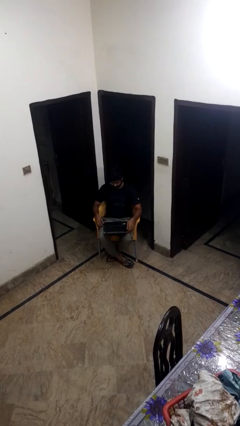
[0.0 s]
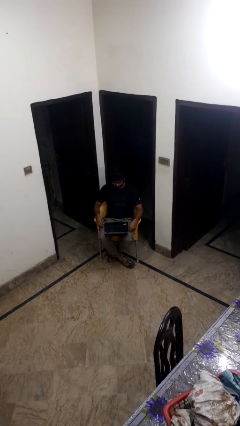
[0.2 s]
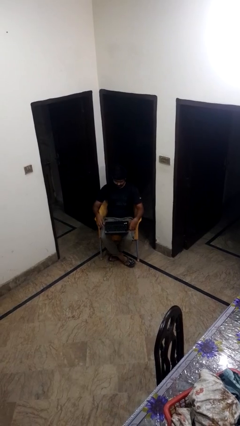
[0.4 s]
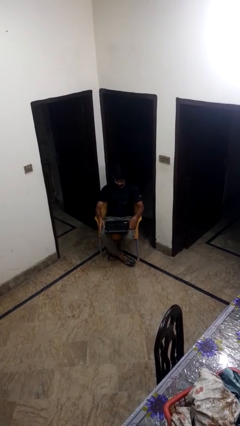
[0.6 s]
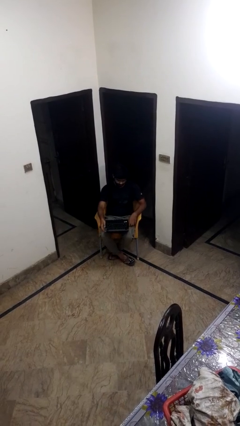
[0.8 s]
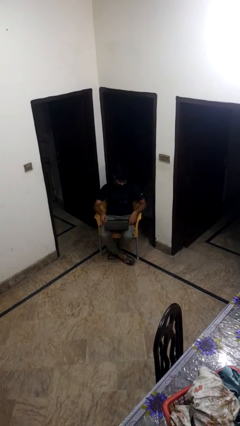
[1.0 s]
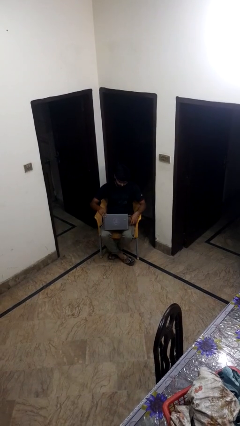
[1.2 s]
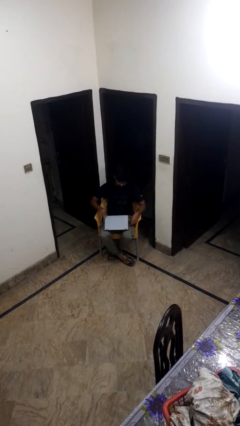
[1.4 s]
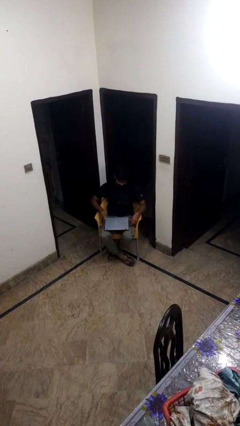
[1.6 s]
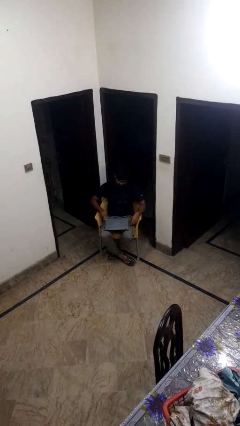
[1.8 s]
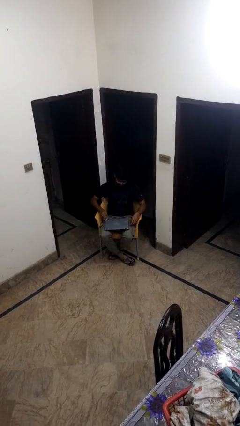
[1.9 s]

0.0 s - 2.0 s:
person closes laptop

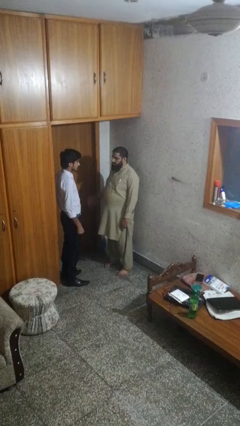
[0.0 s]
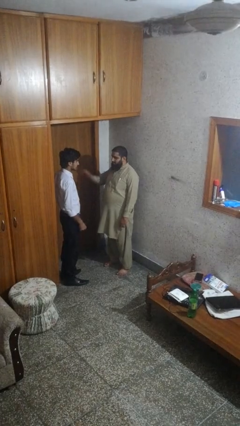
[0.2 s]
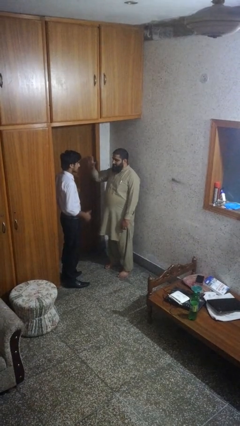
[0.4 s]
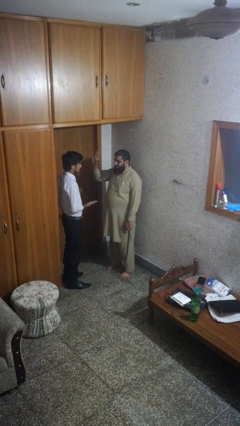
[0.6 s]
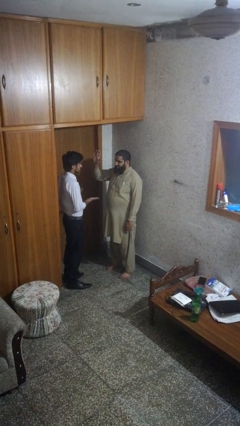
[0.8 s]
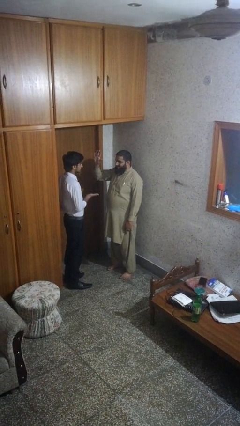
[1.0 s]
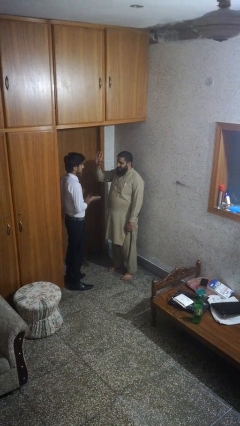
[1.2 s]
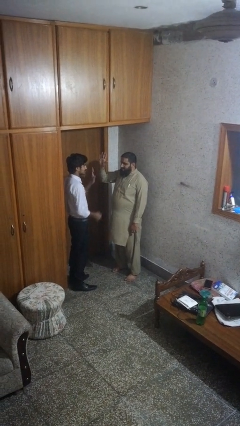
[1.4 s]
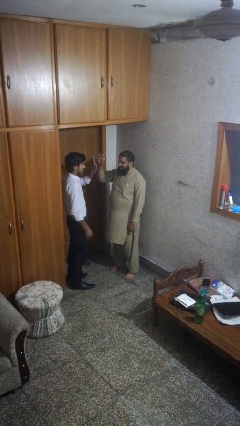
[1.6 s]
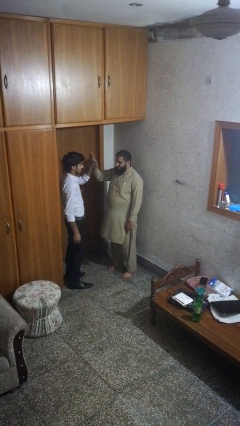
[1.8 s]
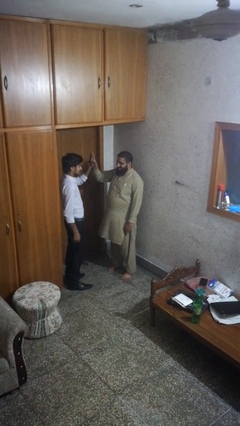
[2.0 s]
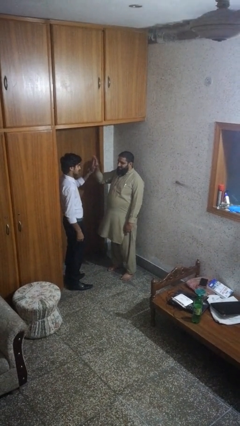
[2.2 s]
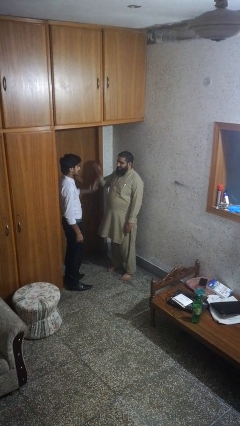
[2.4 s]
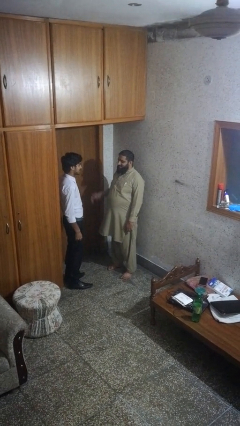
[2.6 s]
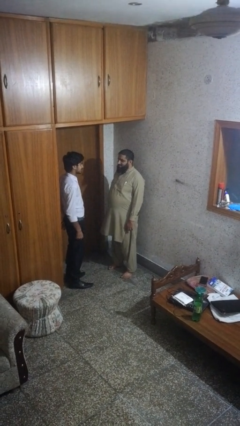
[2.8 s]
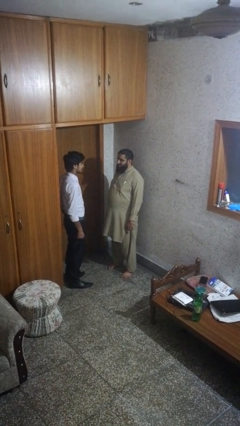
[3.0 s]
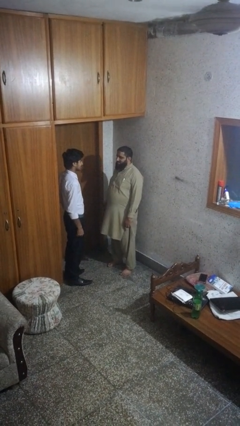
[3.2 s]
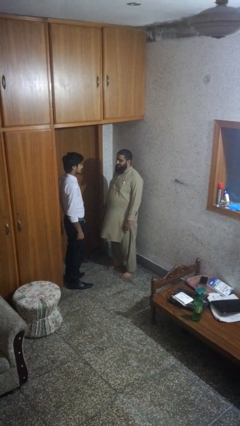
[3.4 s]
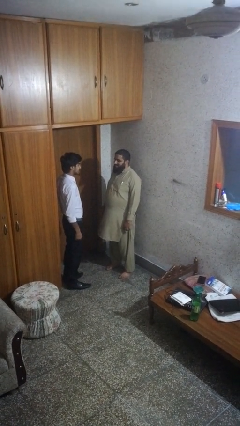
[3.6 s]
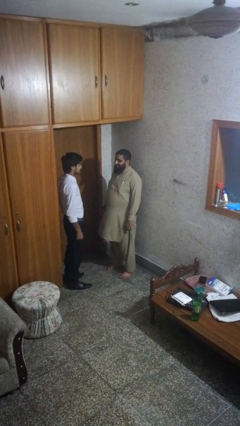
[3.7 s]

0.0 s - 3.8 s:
person highfives hand

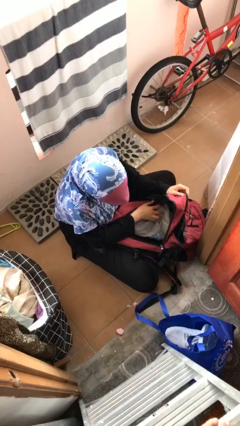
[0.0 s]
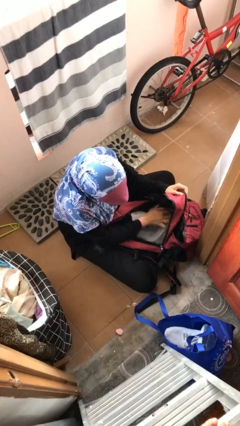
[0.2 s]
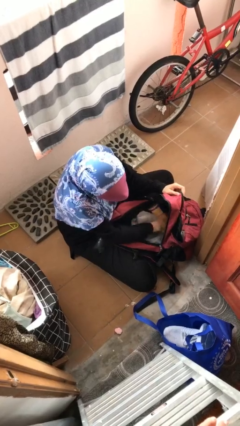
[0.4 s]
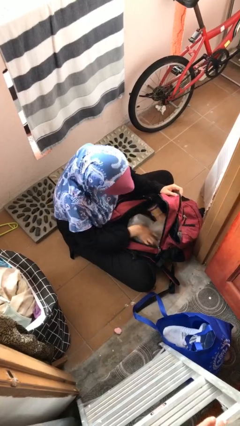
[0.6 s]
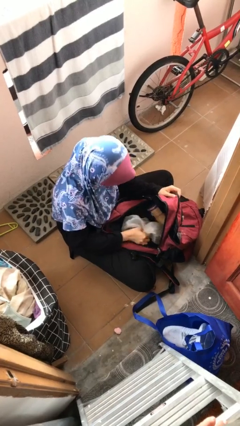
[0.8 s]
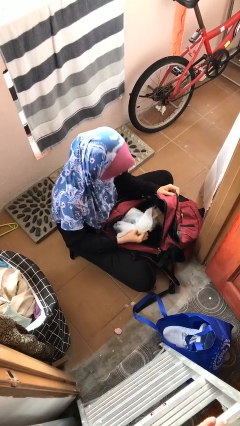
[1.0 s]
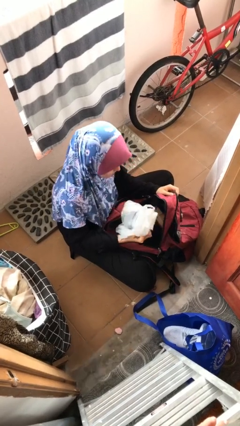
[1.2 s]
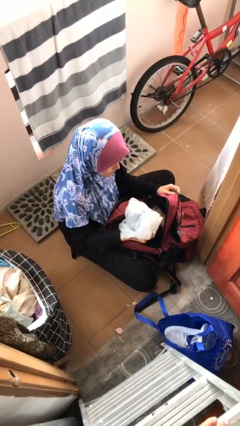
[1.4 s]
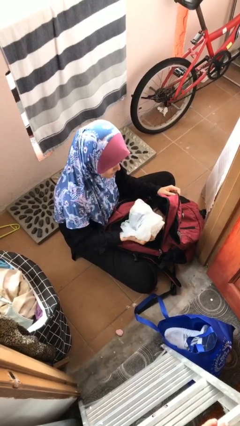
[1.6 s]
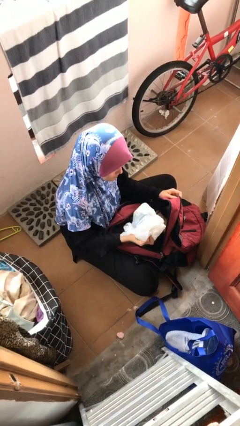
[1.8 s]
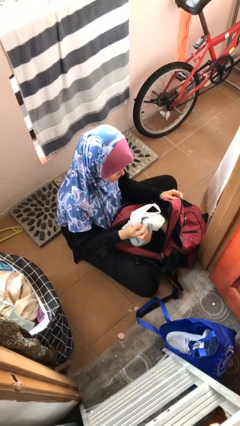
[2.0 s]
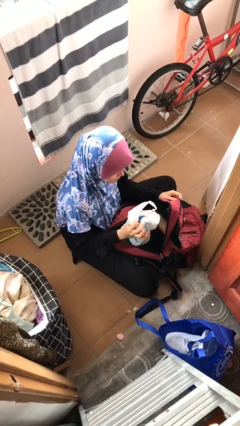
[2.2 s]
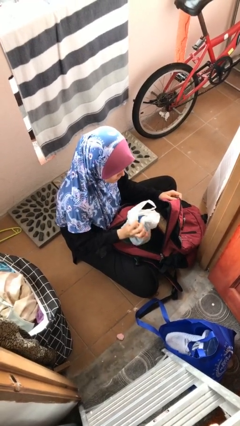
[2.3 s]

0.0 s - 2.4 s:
person takes object from backpack

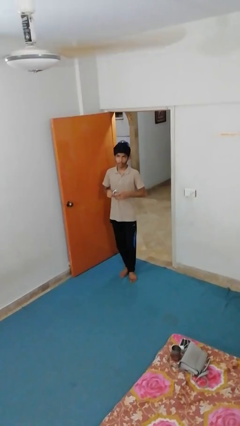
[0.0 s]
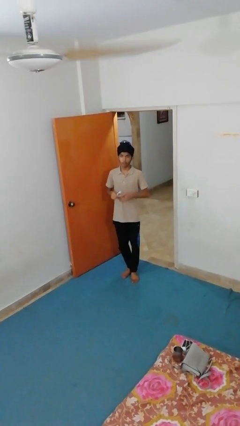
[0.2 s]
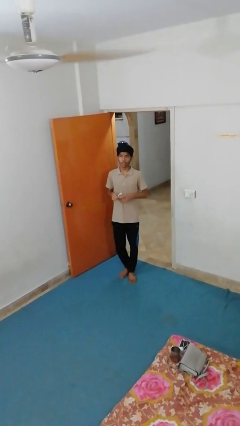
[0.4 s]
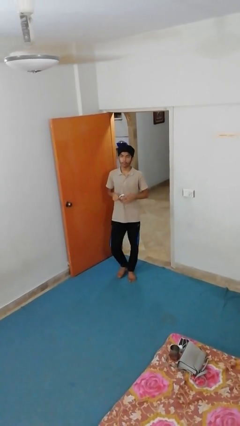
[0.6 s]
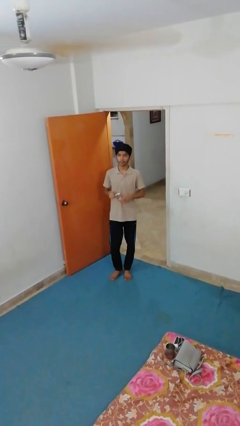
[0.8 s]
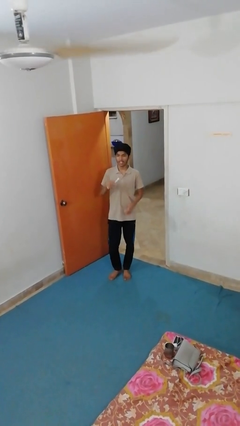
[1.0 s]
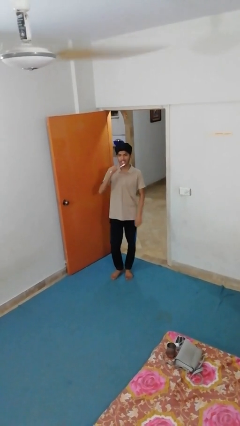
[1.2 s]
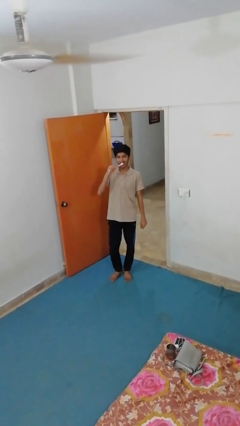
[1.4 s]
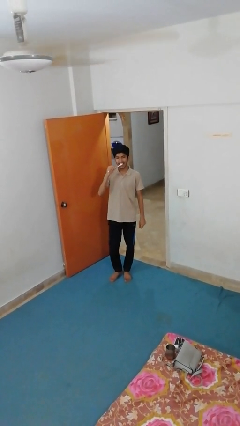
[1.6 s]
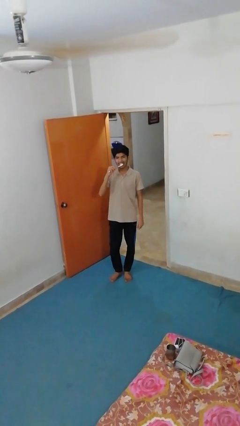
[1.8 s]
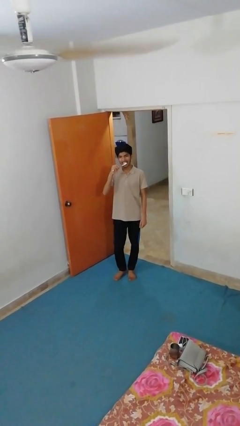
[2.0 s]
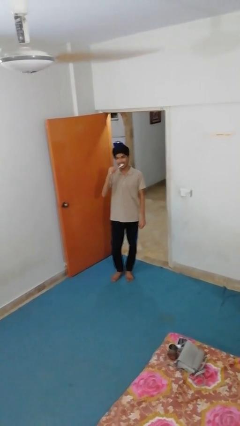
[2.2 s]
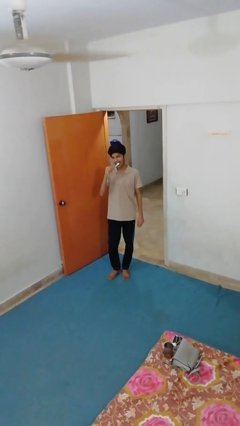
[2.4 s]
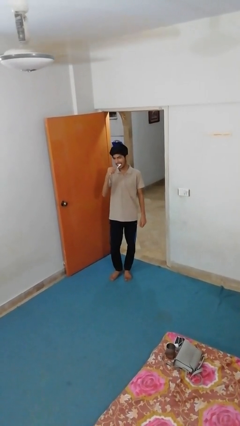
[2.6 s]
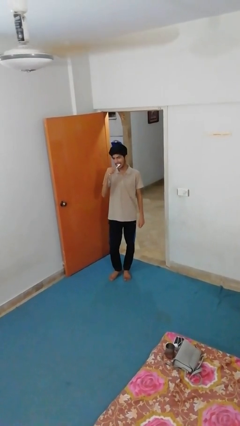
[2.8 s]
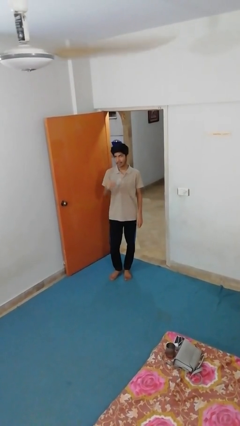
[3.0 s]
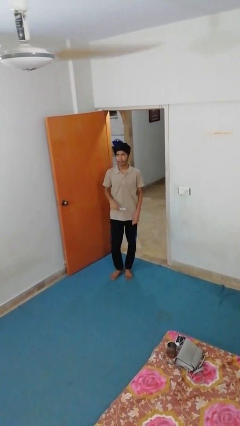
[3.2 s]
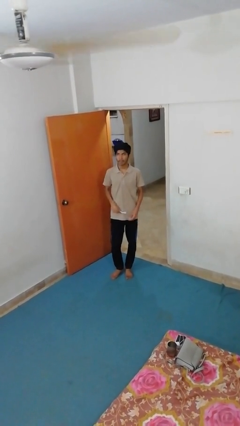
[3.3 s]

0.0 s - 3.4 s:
person brushes teeth

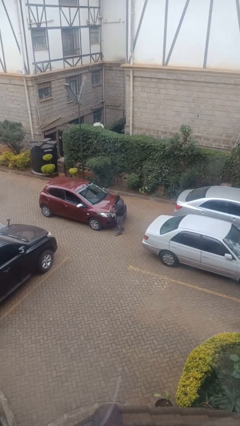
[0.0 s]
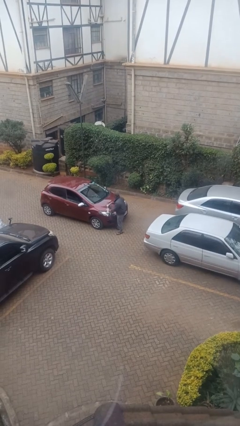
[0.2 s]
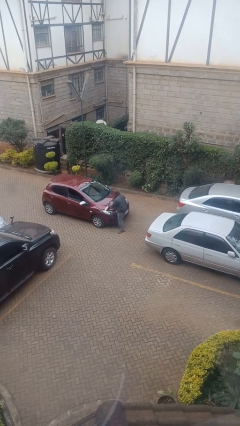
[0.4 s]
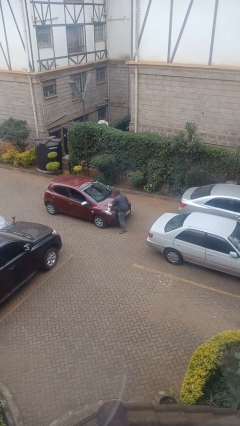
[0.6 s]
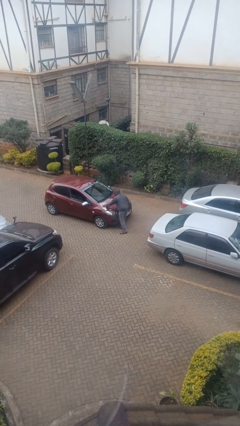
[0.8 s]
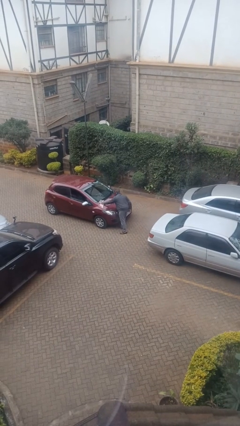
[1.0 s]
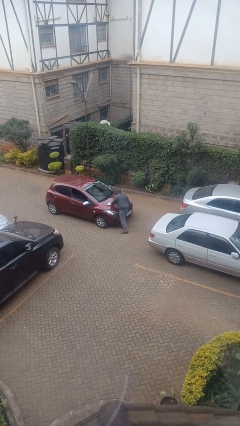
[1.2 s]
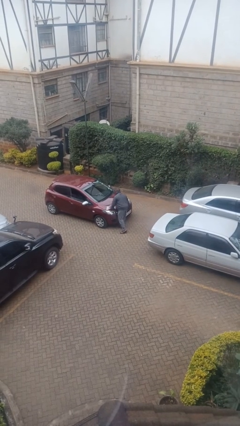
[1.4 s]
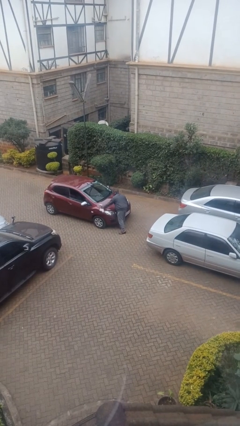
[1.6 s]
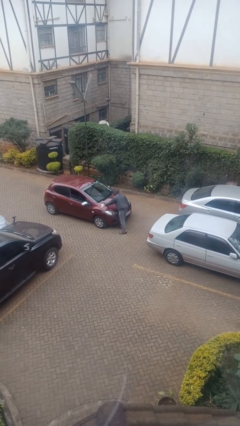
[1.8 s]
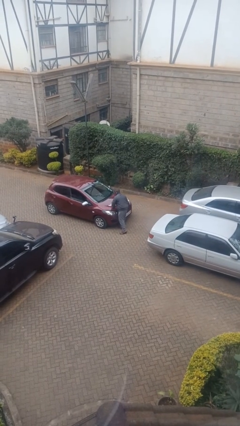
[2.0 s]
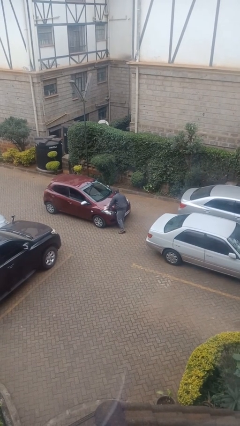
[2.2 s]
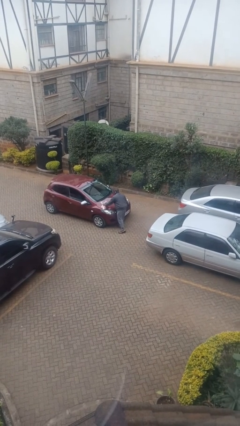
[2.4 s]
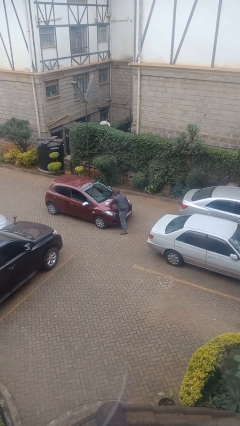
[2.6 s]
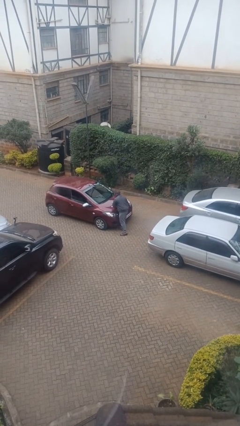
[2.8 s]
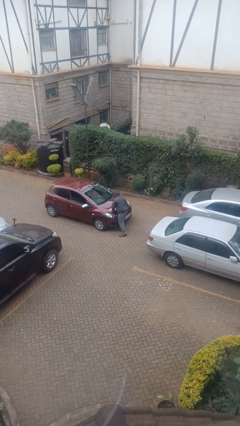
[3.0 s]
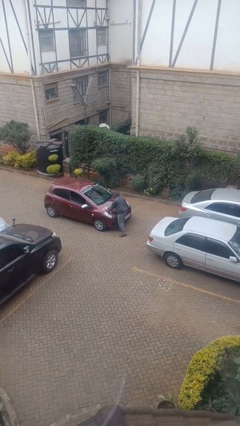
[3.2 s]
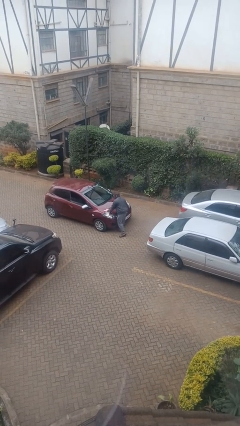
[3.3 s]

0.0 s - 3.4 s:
person polishes car with rag

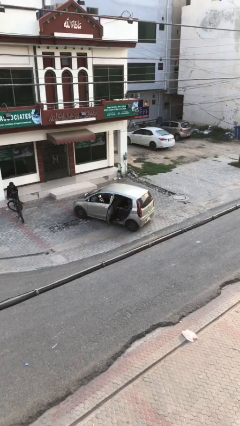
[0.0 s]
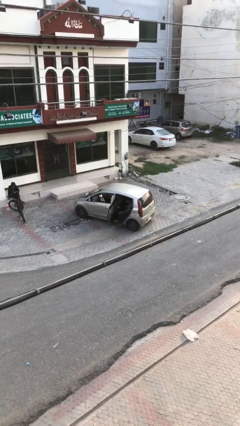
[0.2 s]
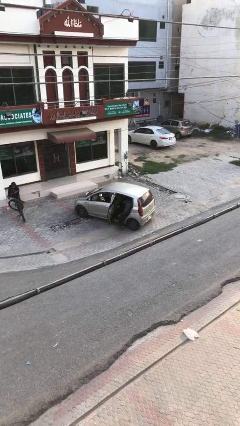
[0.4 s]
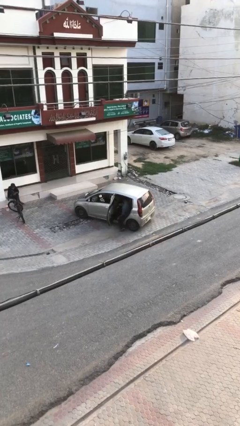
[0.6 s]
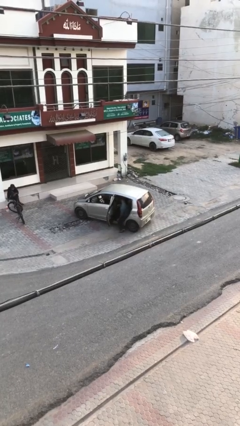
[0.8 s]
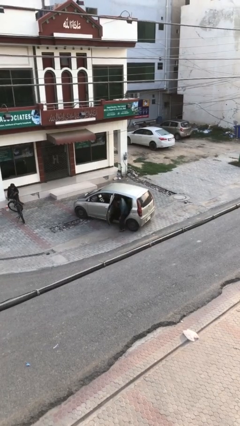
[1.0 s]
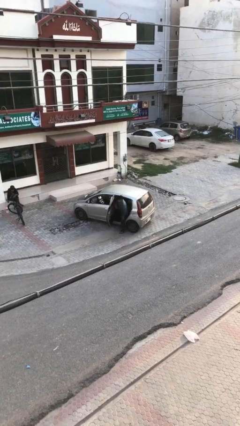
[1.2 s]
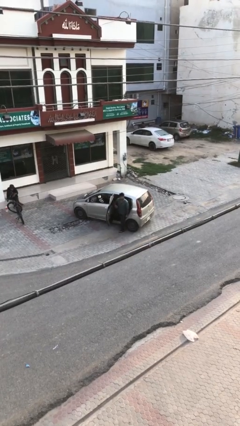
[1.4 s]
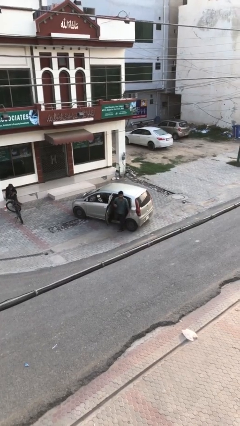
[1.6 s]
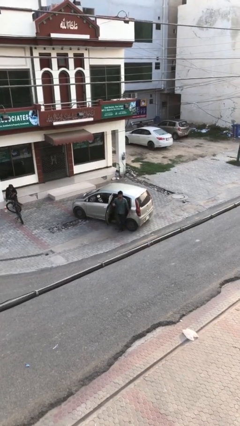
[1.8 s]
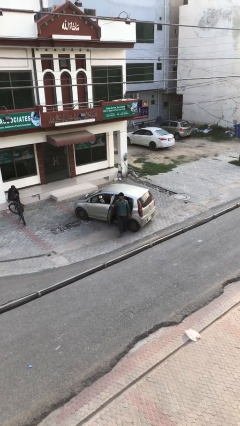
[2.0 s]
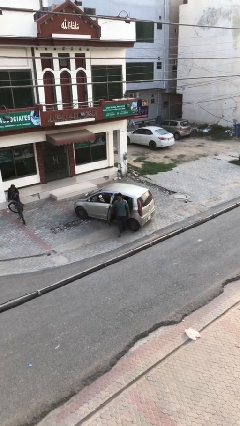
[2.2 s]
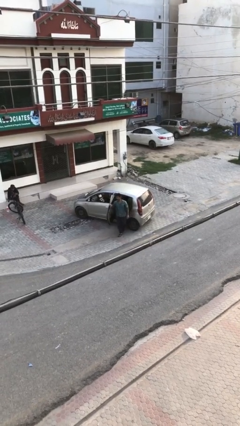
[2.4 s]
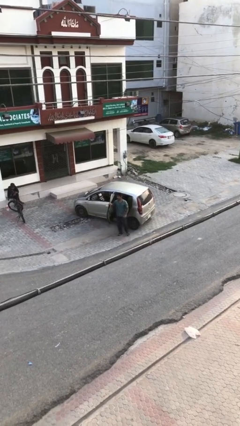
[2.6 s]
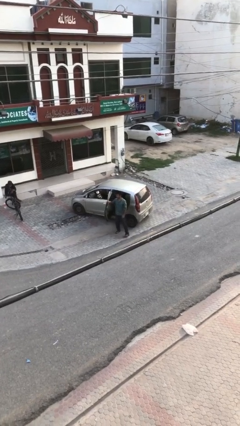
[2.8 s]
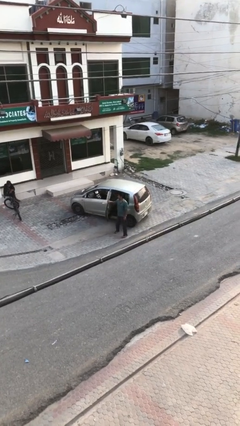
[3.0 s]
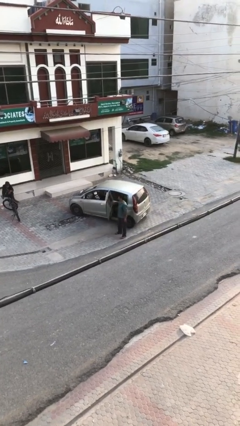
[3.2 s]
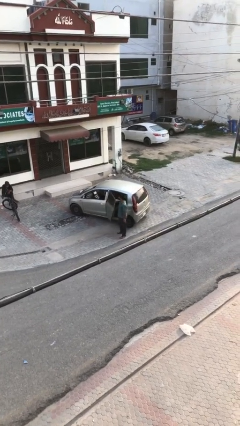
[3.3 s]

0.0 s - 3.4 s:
person exits car
